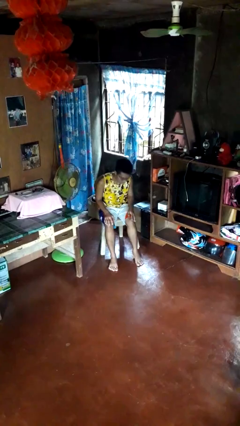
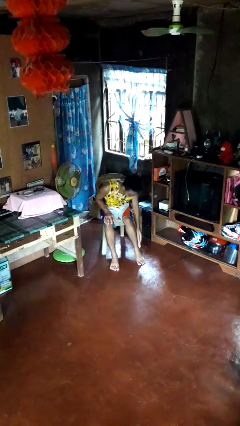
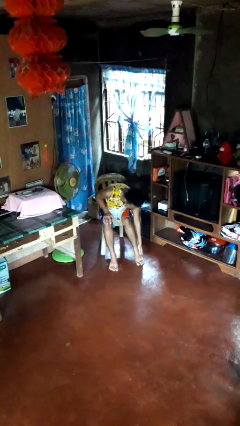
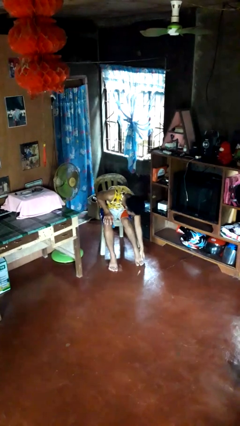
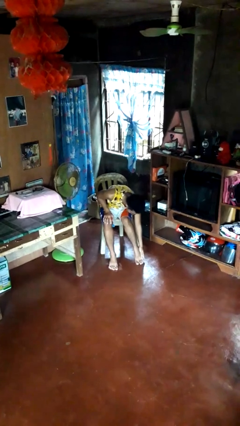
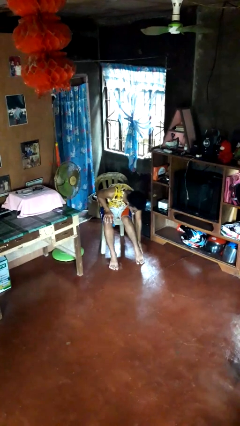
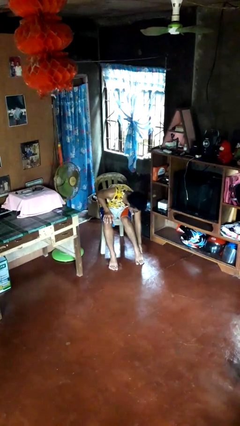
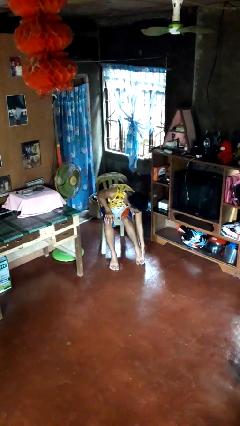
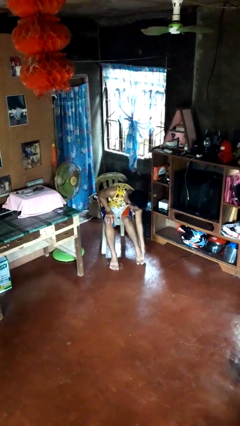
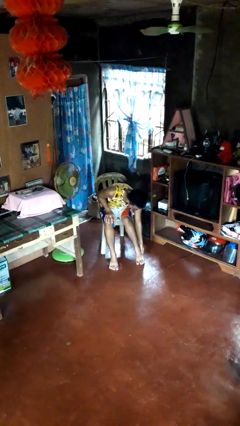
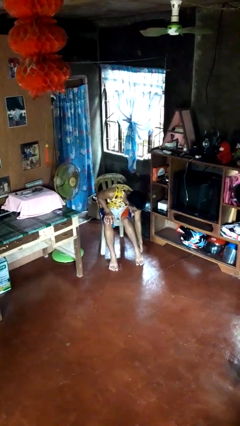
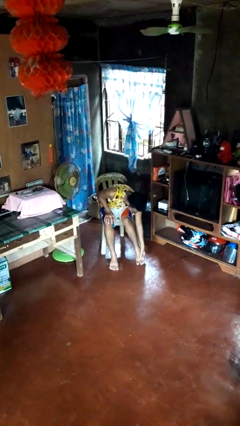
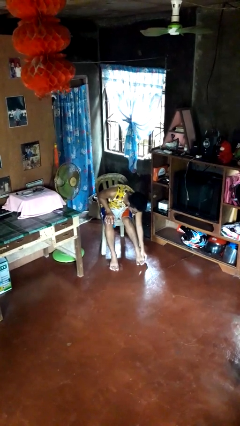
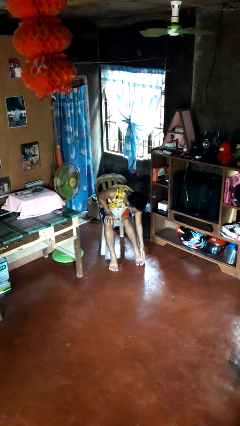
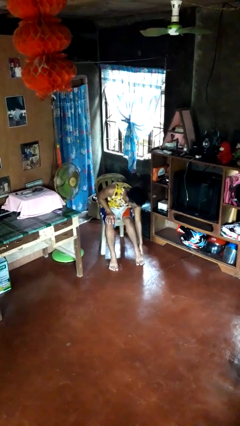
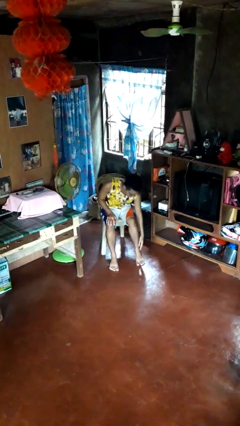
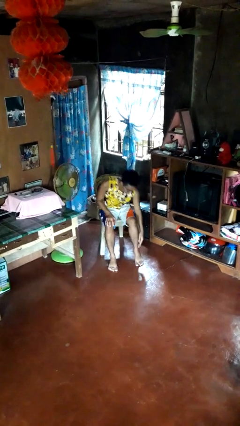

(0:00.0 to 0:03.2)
person rubs foot

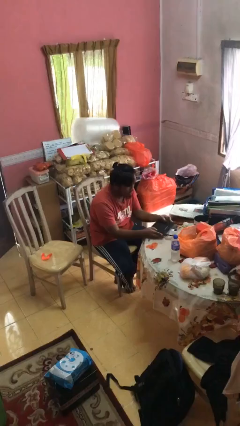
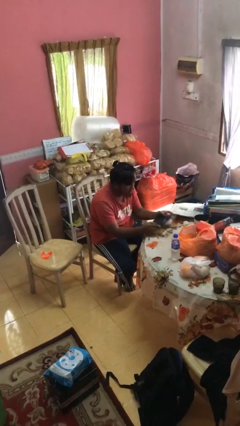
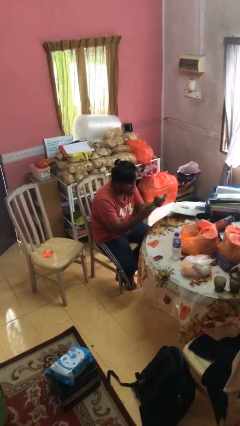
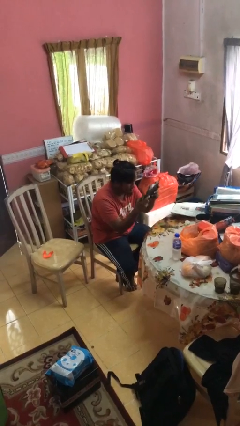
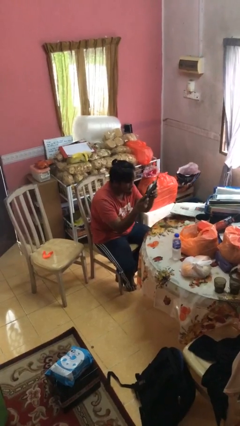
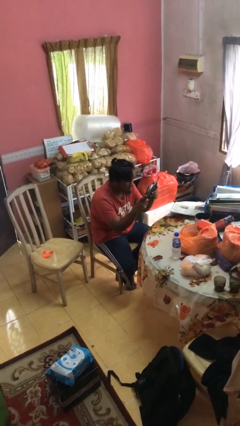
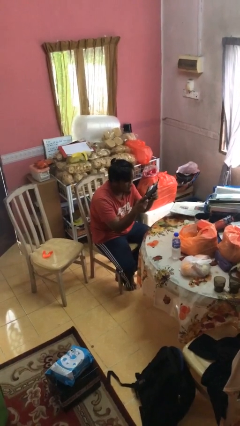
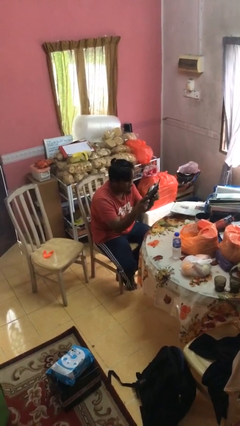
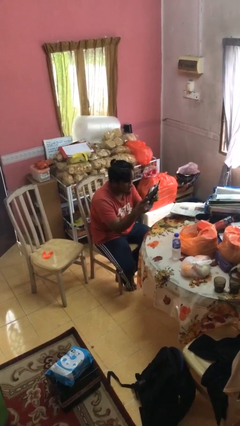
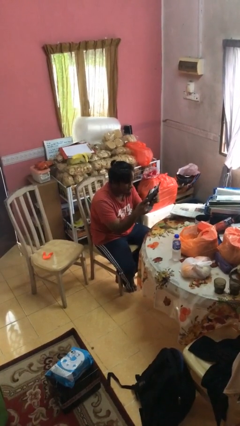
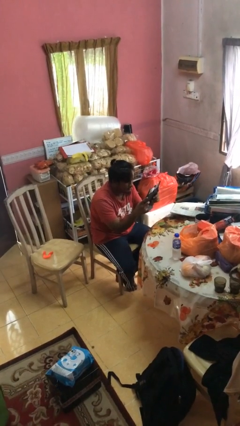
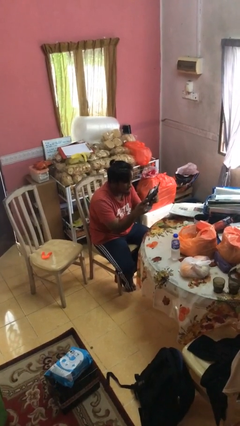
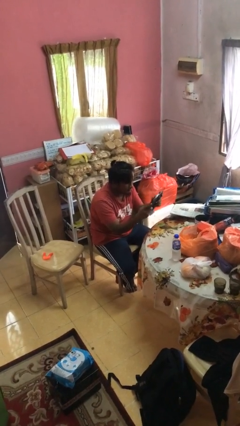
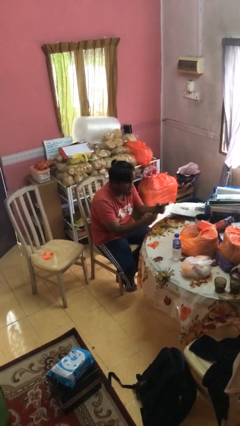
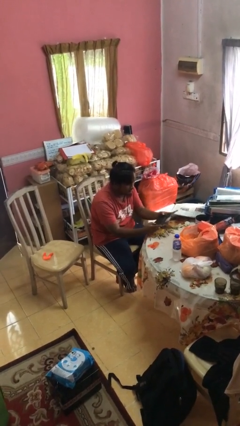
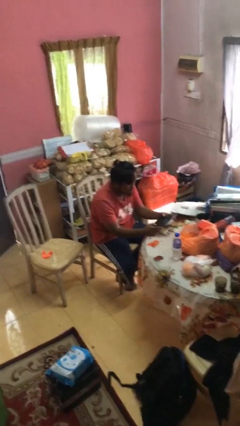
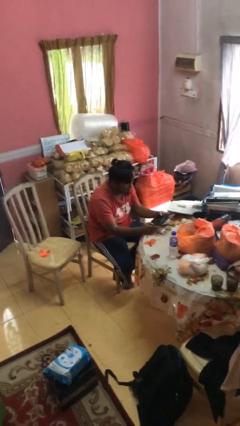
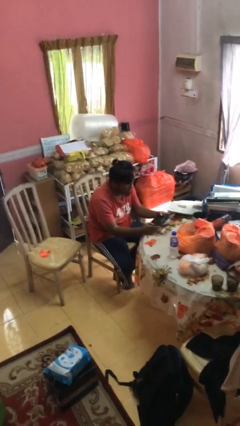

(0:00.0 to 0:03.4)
person interacts with handheld game

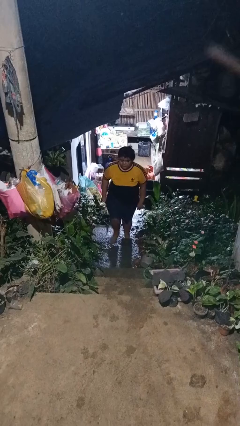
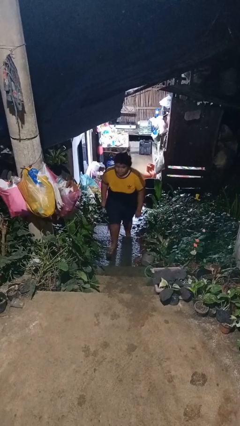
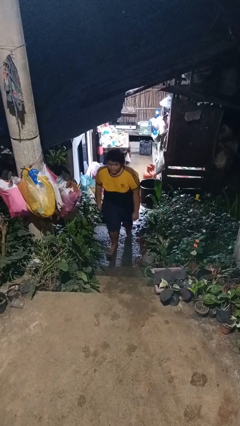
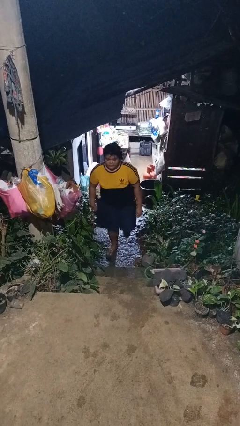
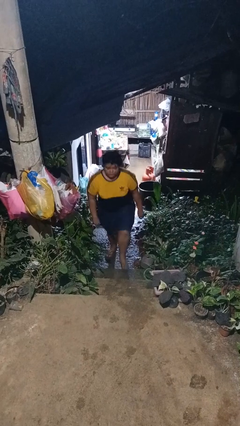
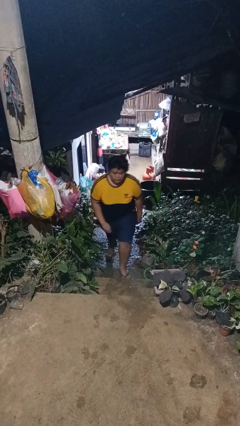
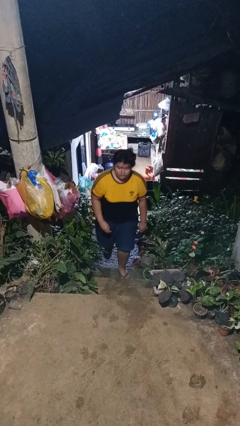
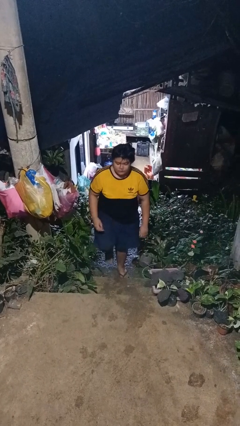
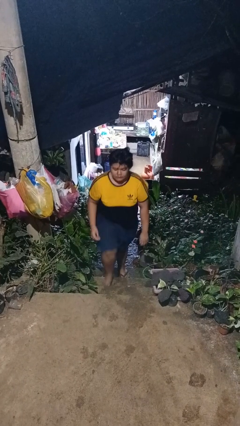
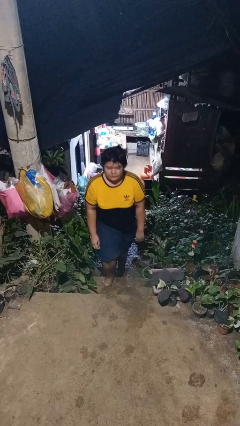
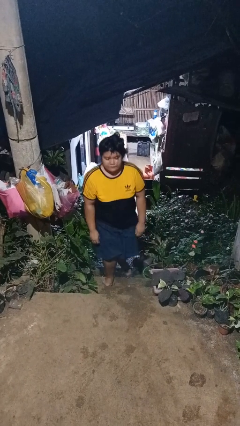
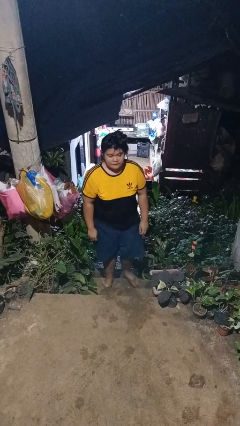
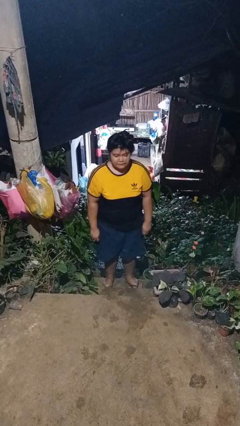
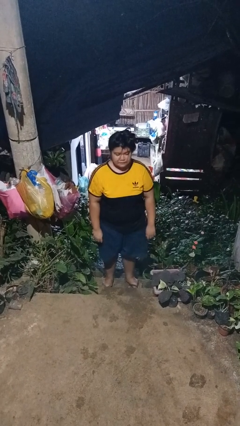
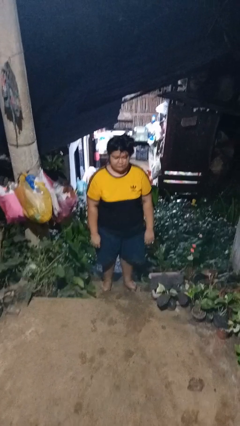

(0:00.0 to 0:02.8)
person climbs up stairs

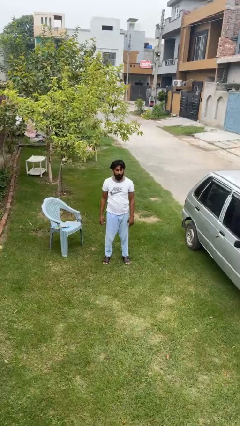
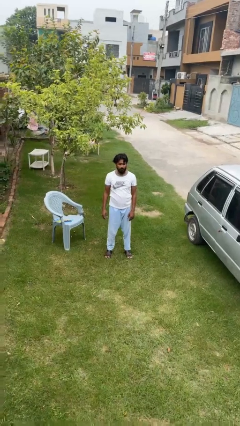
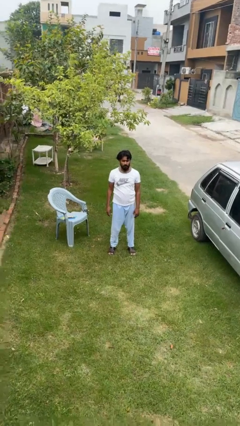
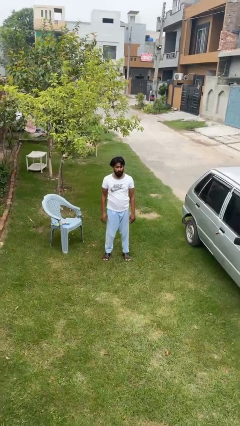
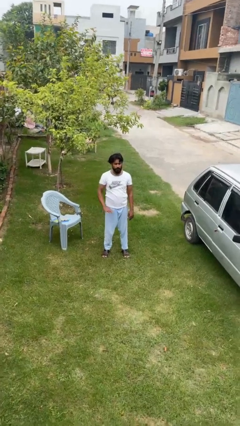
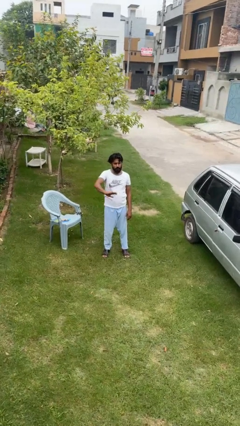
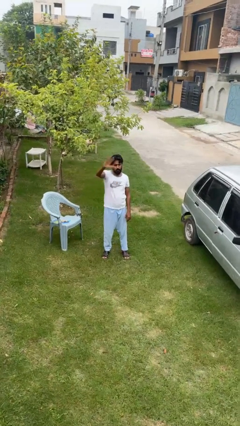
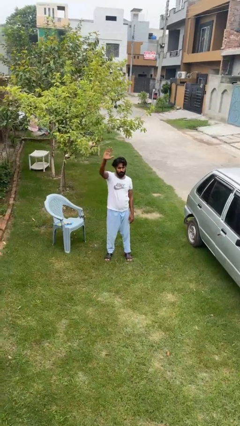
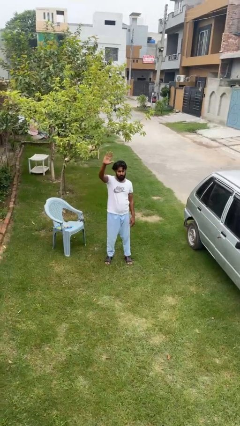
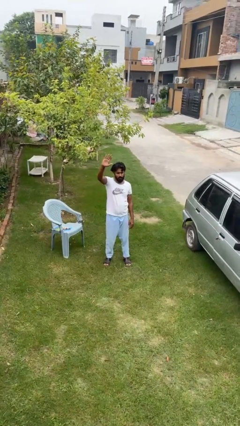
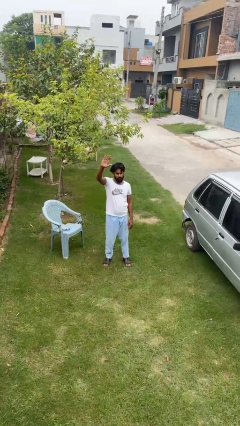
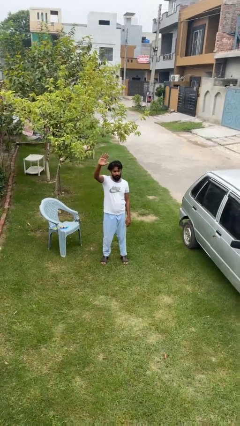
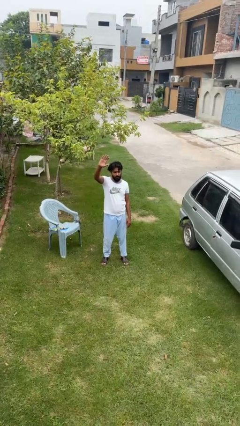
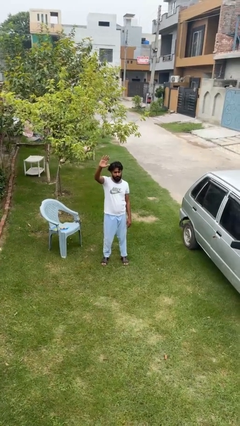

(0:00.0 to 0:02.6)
person gestures swipe up

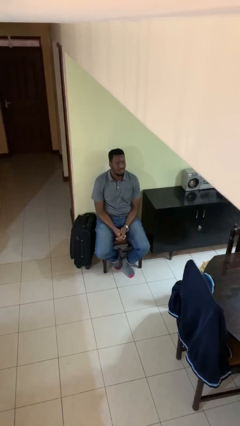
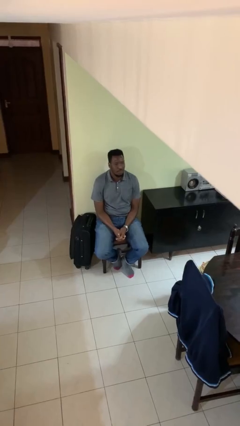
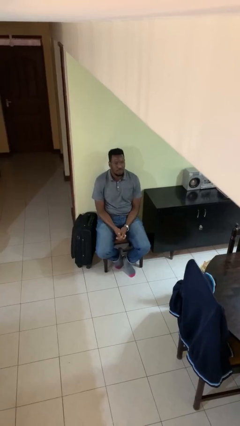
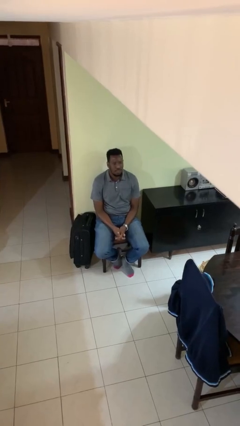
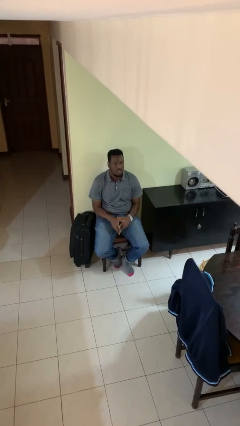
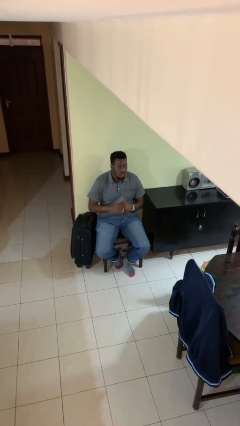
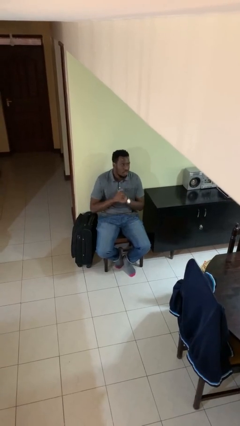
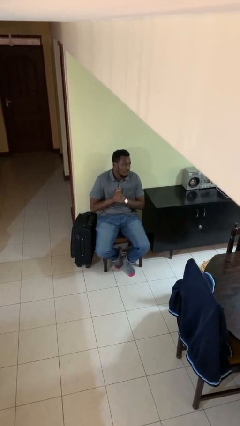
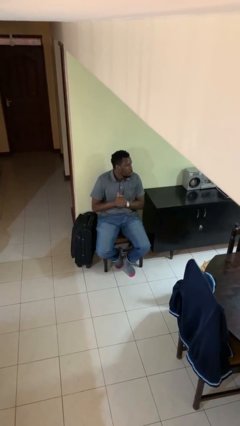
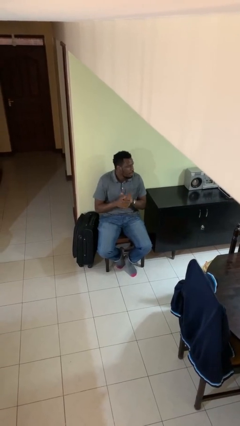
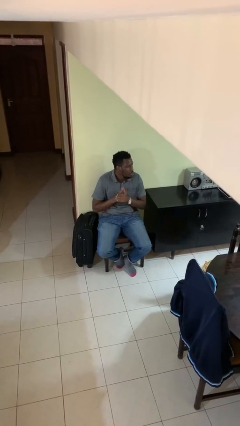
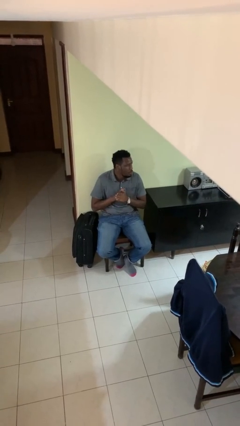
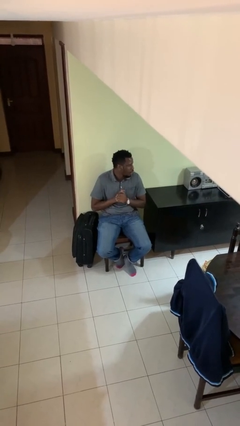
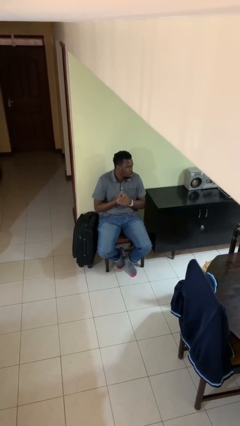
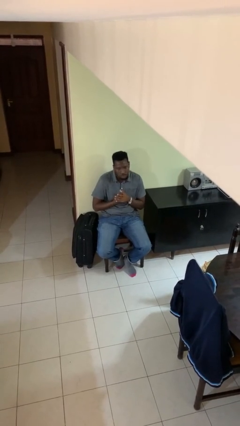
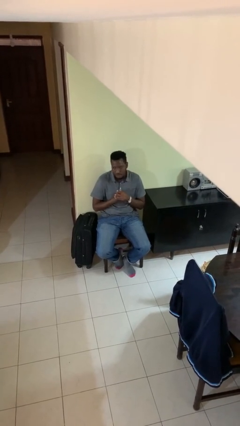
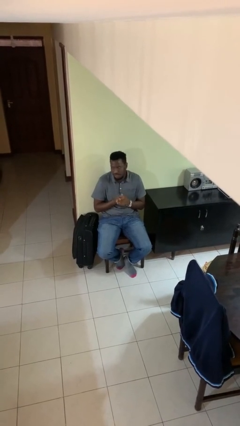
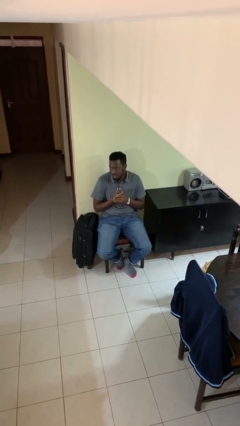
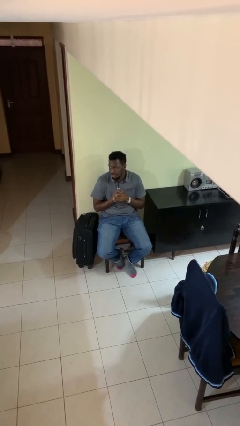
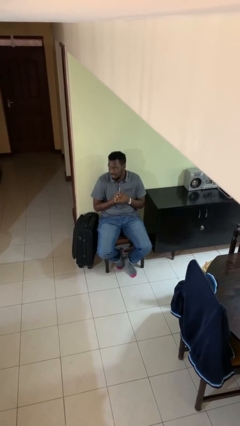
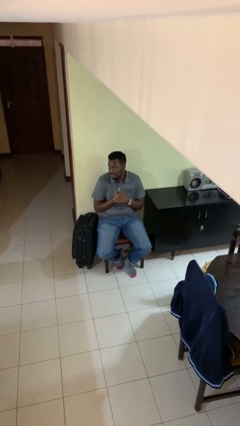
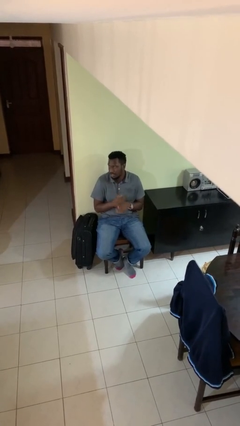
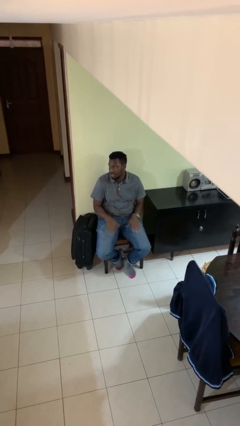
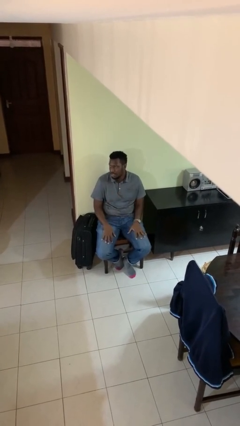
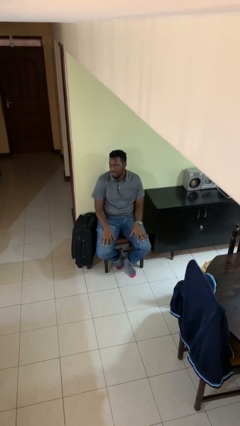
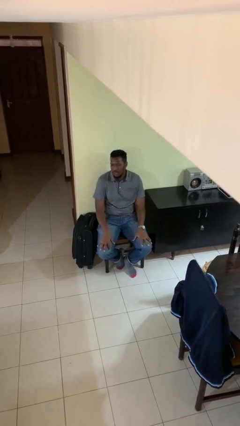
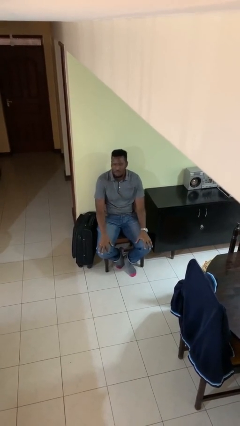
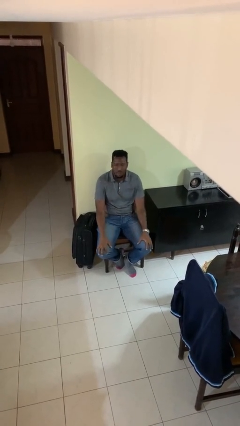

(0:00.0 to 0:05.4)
person cracks knuckles
